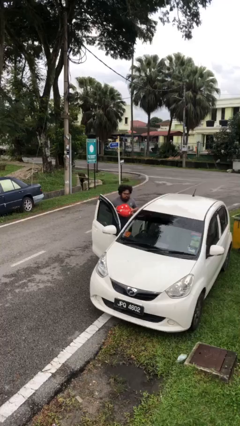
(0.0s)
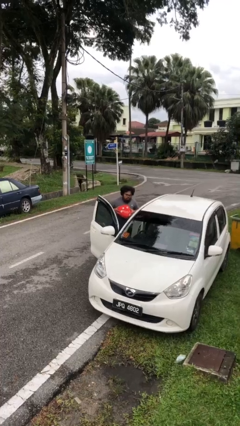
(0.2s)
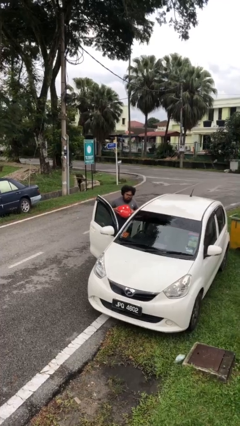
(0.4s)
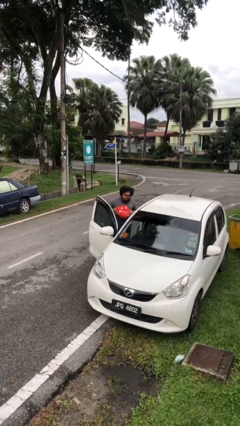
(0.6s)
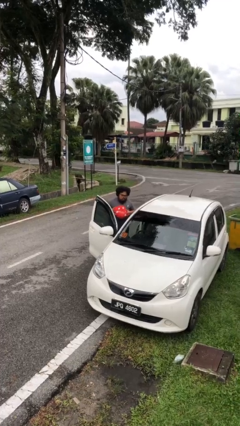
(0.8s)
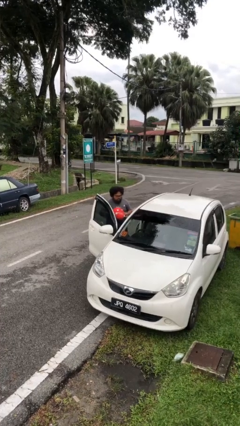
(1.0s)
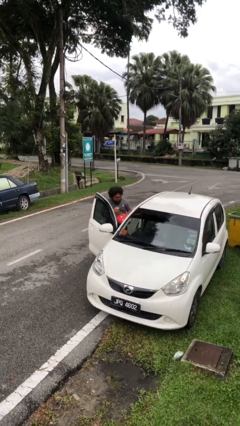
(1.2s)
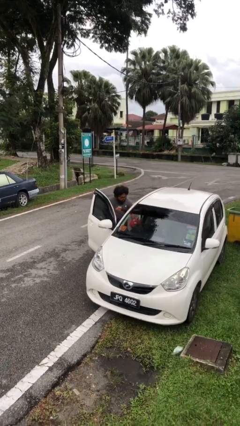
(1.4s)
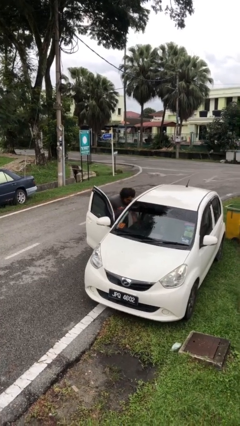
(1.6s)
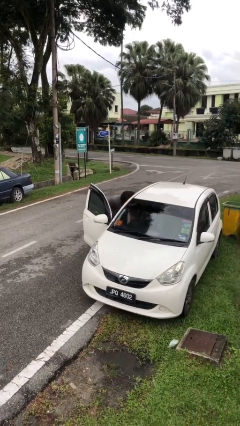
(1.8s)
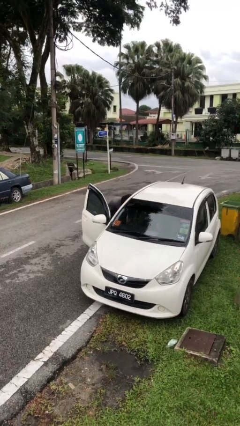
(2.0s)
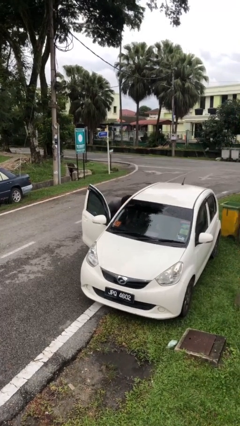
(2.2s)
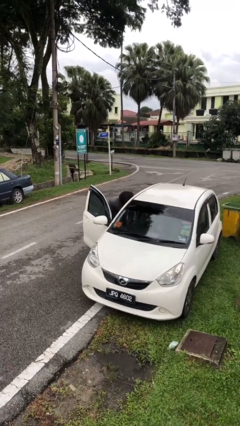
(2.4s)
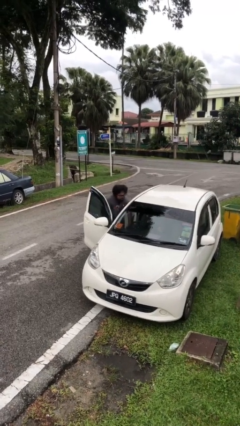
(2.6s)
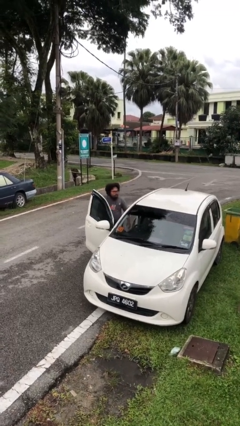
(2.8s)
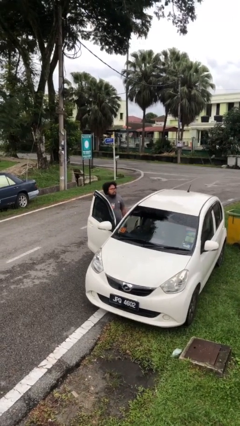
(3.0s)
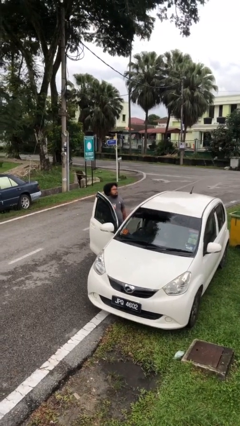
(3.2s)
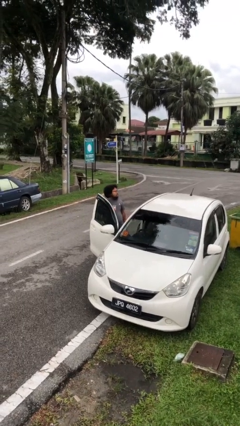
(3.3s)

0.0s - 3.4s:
person loads car

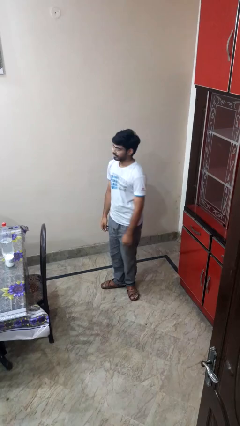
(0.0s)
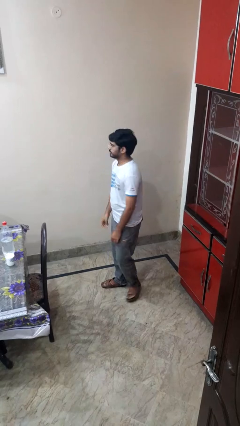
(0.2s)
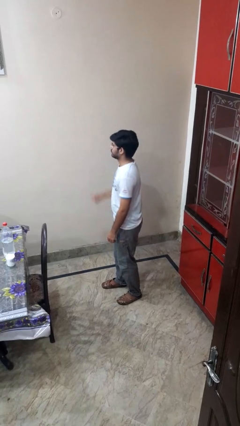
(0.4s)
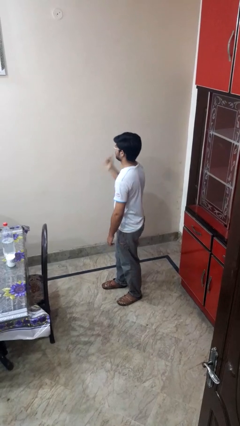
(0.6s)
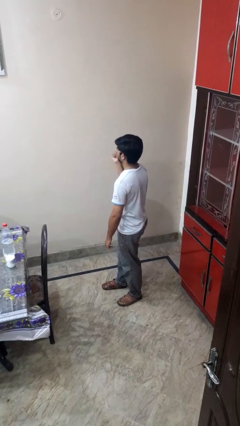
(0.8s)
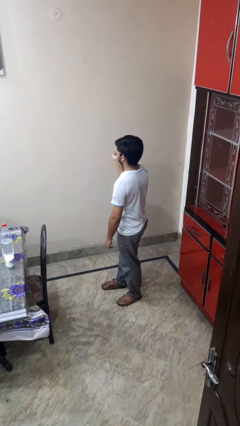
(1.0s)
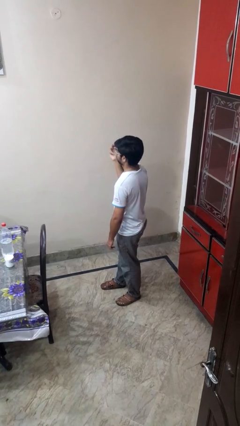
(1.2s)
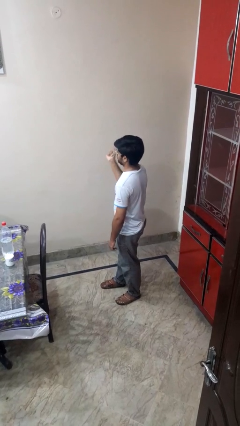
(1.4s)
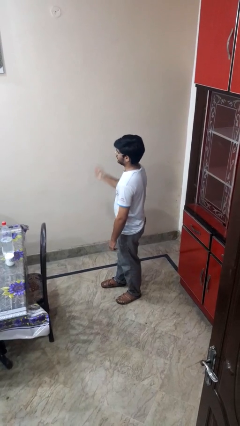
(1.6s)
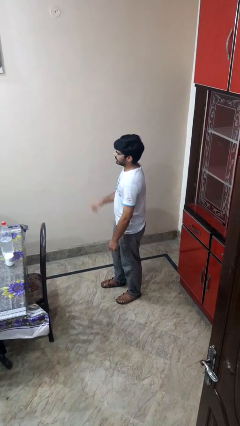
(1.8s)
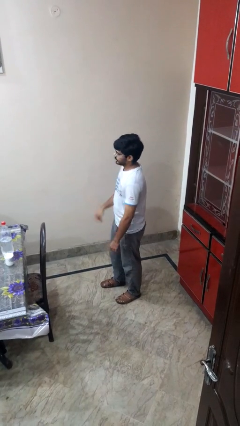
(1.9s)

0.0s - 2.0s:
person snaps fingers

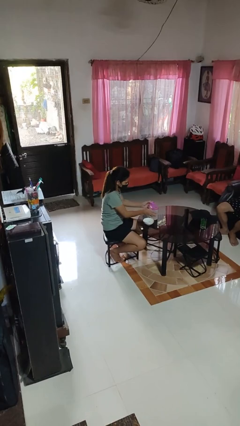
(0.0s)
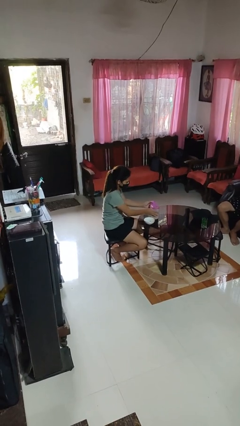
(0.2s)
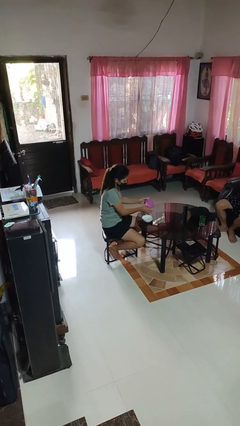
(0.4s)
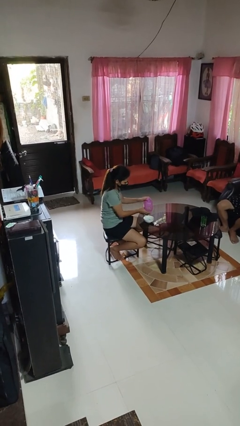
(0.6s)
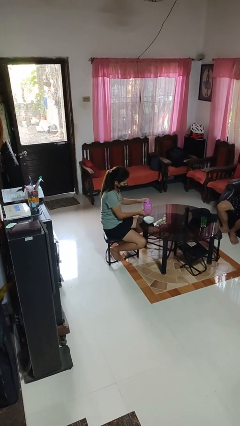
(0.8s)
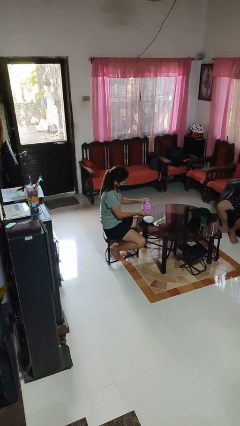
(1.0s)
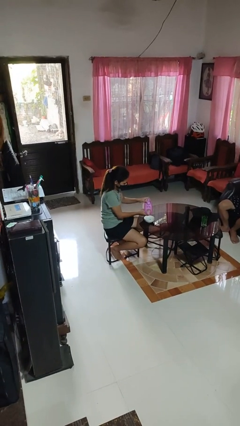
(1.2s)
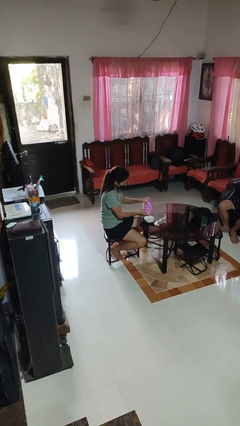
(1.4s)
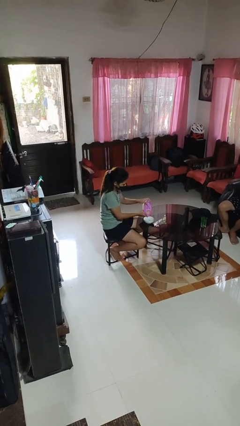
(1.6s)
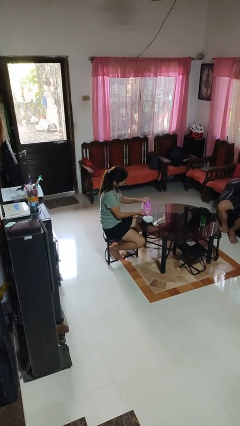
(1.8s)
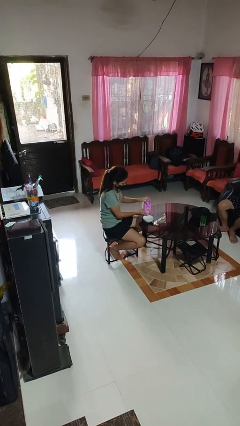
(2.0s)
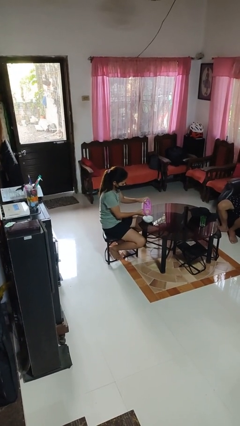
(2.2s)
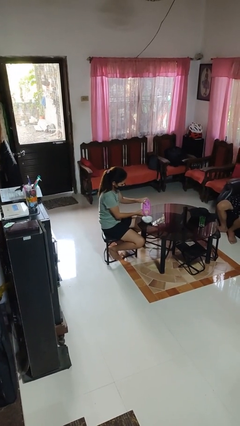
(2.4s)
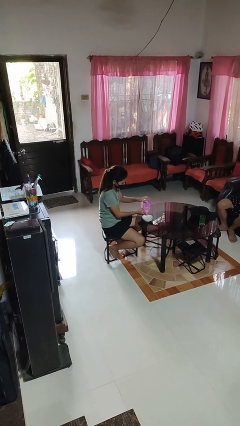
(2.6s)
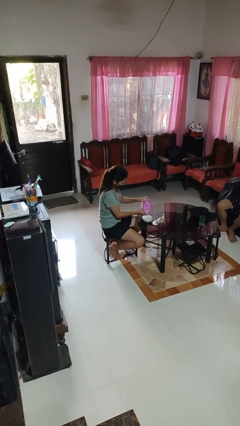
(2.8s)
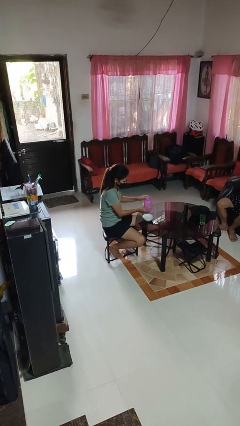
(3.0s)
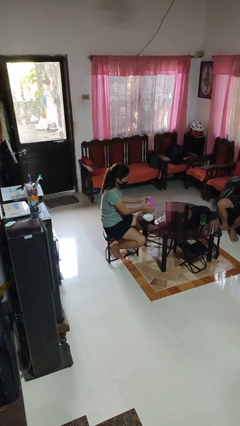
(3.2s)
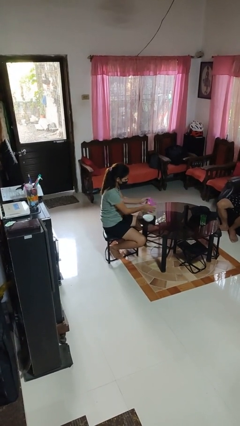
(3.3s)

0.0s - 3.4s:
person pours into bowl

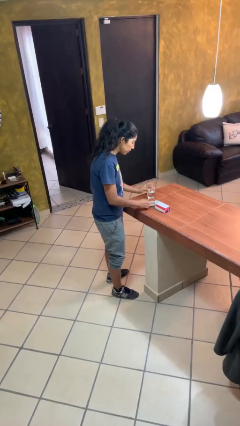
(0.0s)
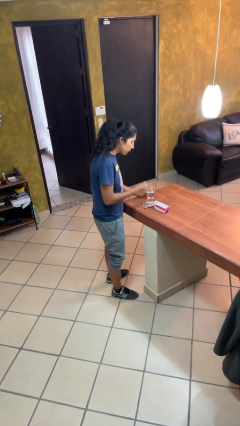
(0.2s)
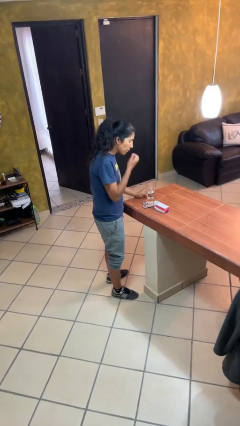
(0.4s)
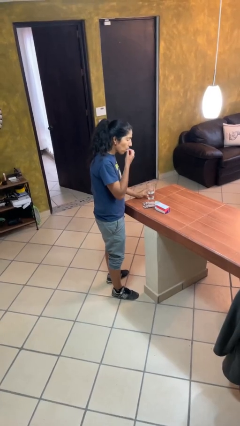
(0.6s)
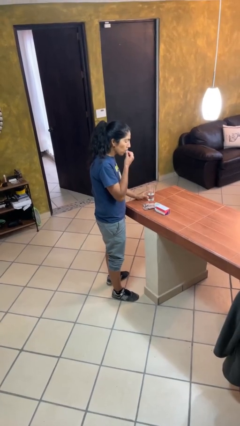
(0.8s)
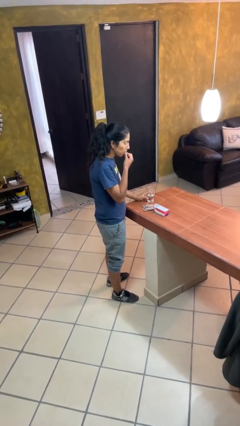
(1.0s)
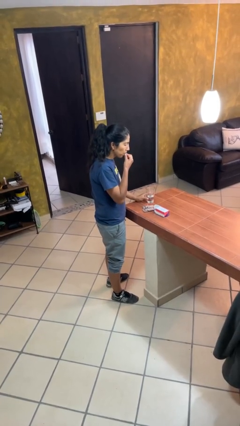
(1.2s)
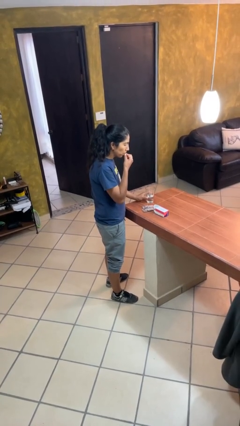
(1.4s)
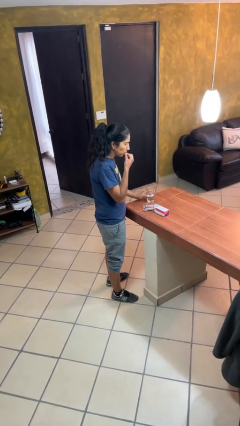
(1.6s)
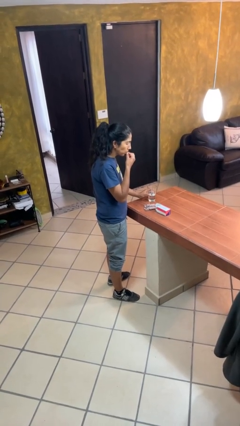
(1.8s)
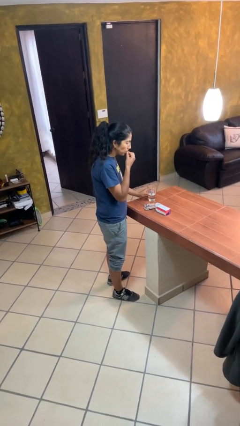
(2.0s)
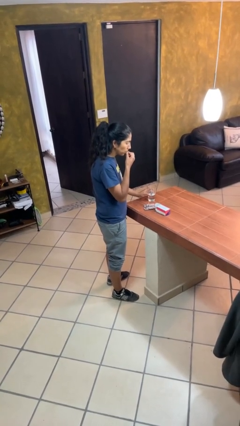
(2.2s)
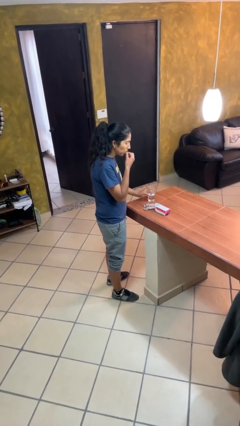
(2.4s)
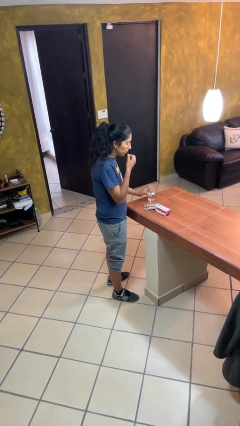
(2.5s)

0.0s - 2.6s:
person takes medicine pills

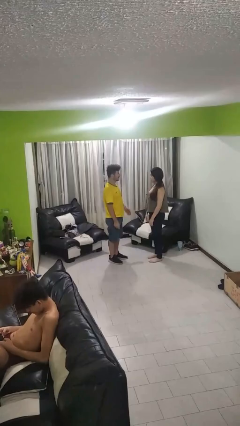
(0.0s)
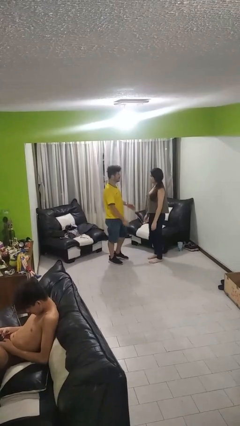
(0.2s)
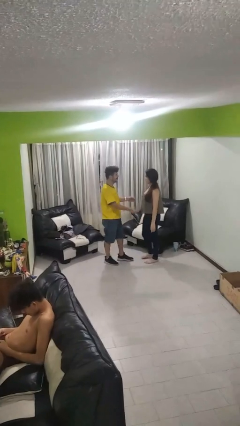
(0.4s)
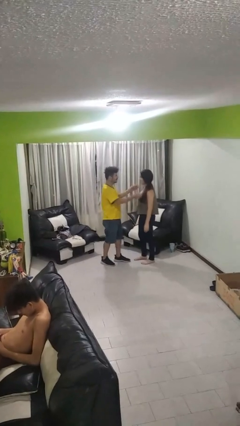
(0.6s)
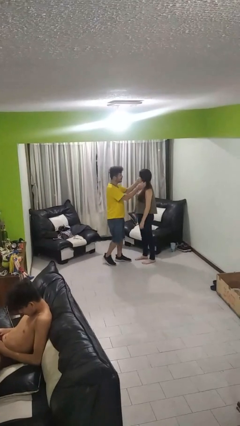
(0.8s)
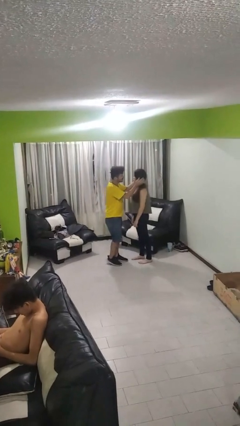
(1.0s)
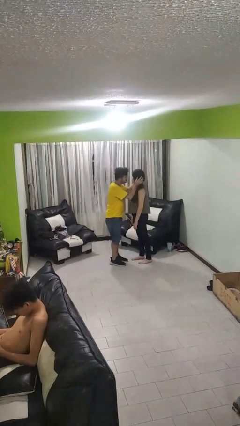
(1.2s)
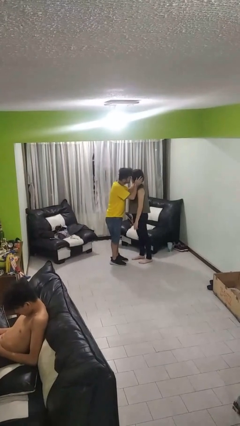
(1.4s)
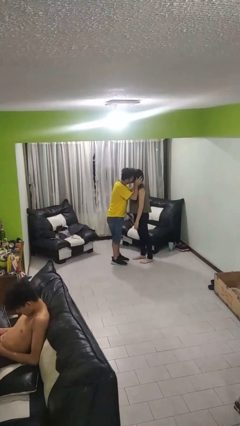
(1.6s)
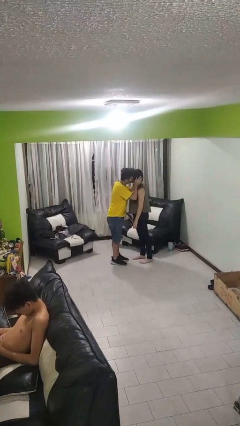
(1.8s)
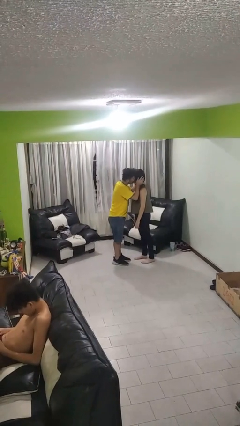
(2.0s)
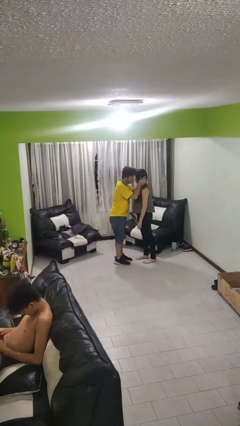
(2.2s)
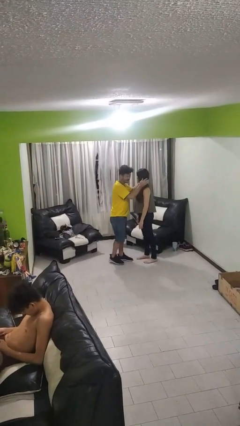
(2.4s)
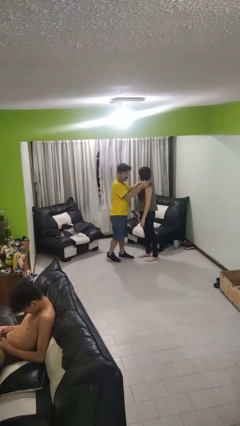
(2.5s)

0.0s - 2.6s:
person kisses cheek of person

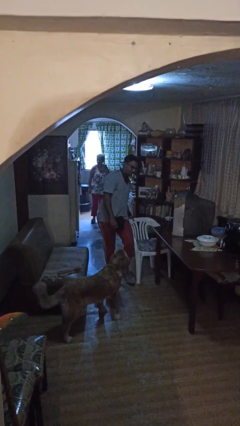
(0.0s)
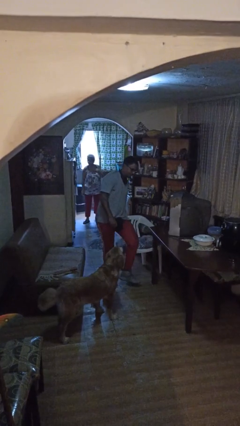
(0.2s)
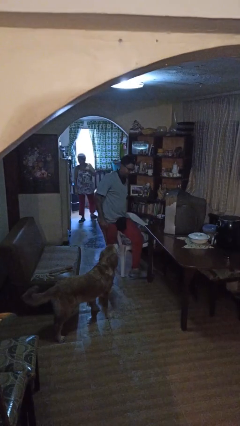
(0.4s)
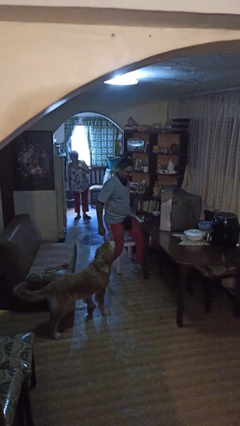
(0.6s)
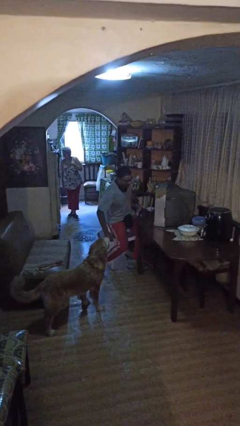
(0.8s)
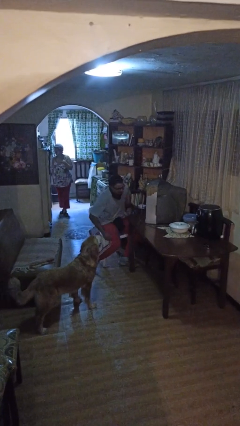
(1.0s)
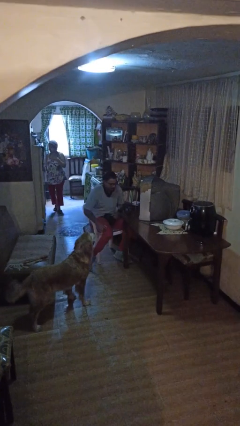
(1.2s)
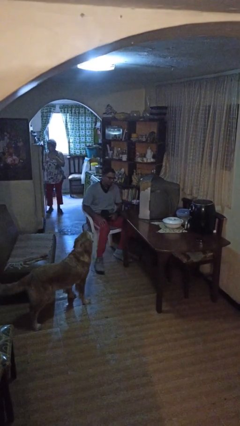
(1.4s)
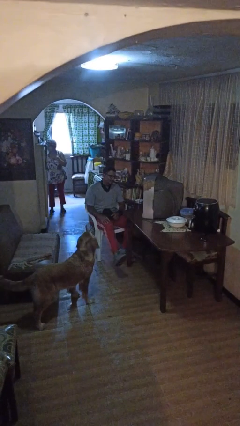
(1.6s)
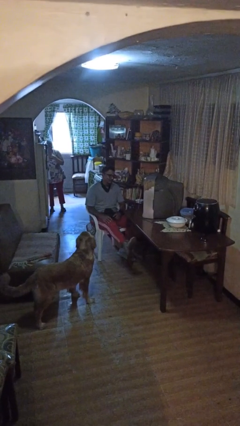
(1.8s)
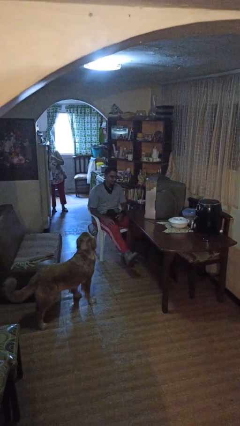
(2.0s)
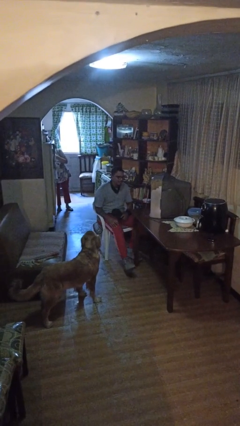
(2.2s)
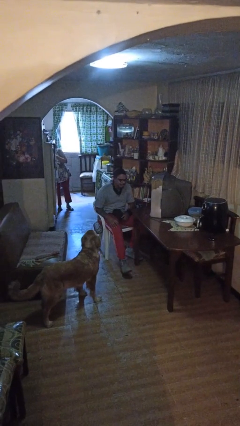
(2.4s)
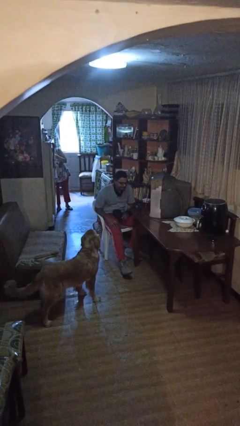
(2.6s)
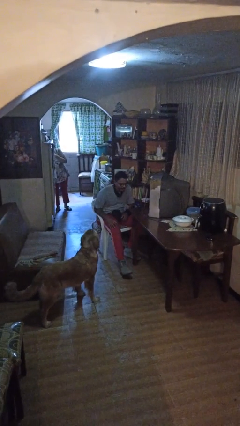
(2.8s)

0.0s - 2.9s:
person sits down

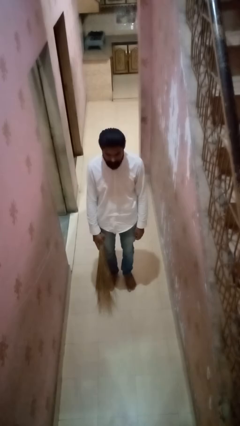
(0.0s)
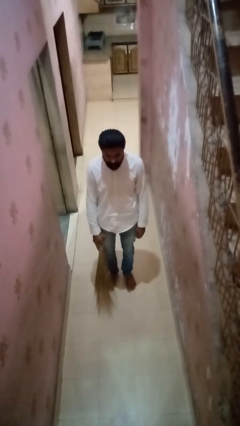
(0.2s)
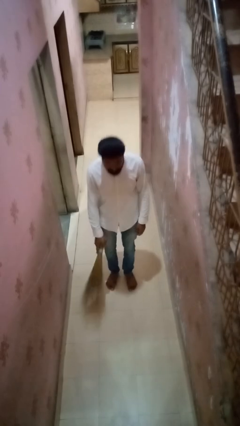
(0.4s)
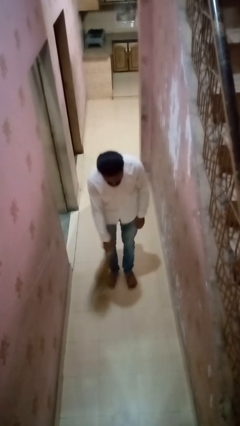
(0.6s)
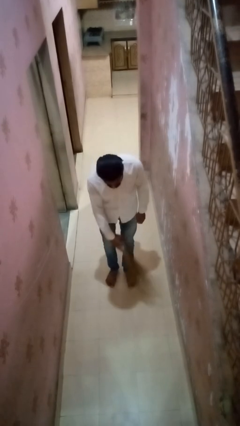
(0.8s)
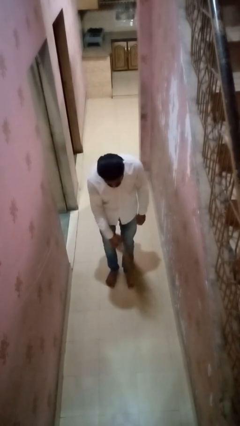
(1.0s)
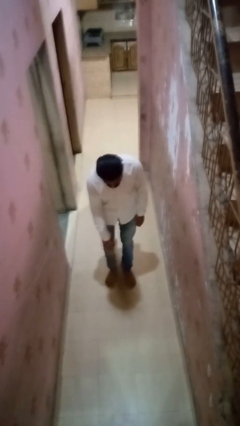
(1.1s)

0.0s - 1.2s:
person sweeps floor
